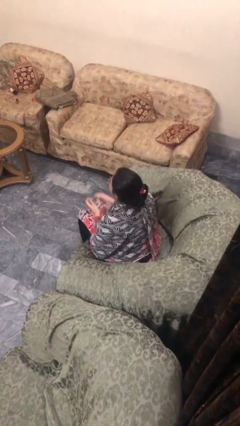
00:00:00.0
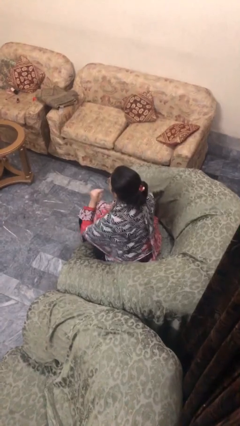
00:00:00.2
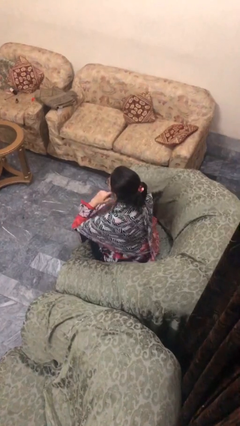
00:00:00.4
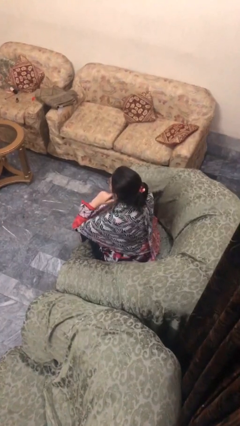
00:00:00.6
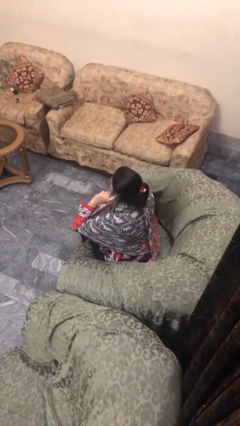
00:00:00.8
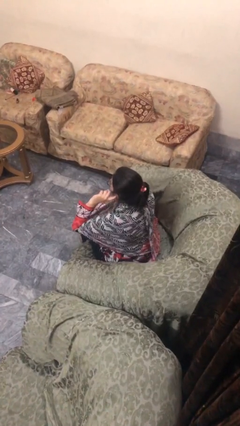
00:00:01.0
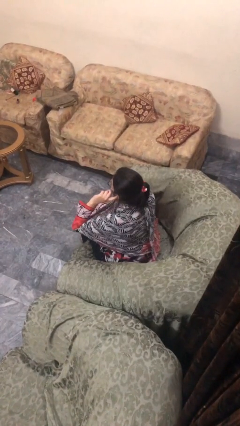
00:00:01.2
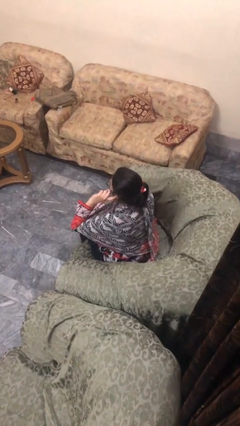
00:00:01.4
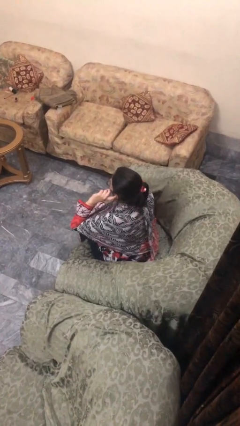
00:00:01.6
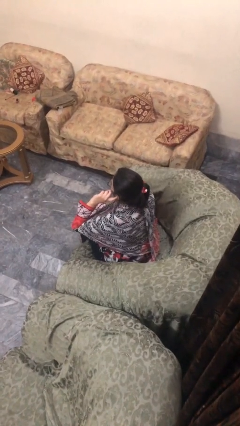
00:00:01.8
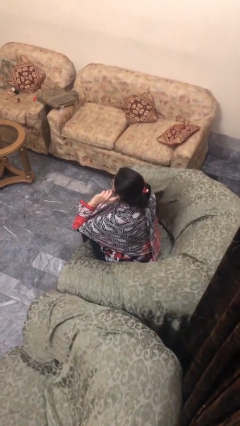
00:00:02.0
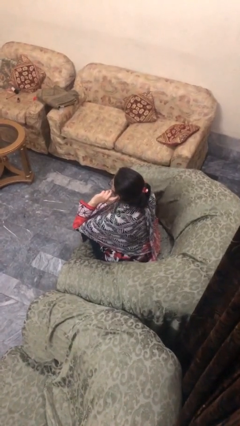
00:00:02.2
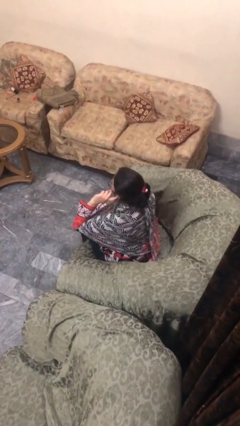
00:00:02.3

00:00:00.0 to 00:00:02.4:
person puts fingers in ear

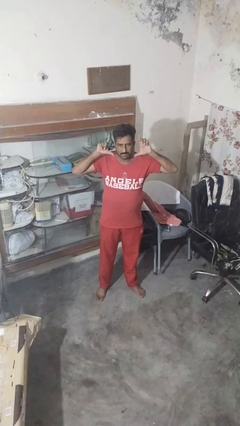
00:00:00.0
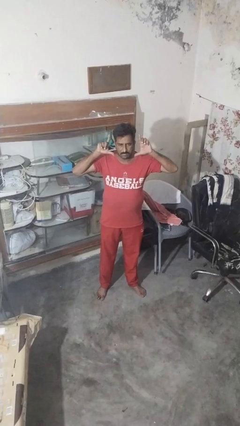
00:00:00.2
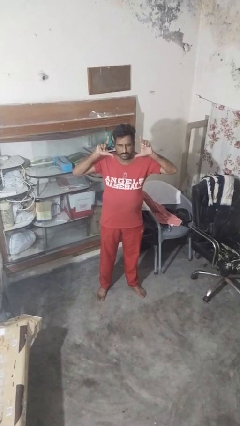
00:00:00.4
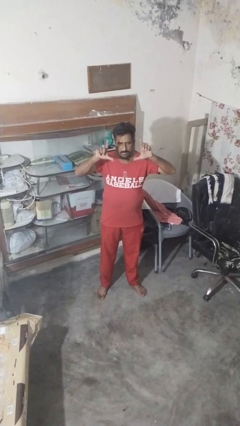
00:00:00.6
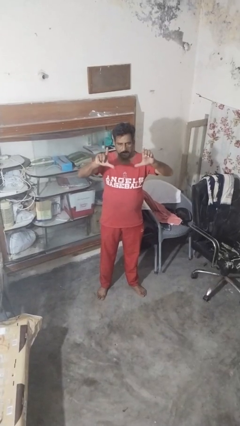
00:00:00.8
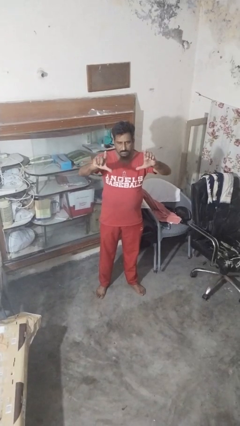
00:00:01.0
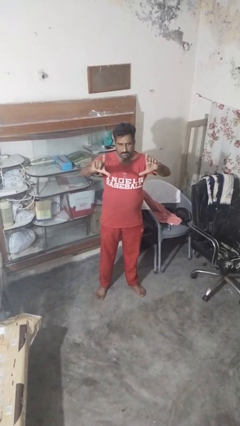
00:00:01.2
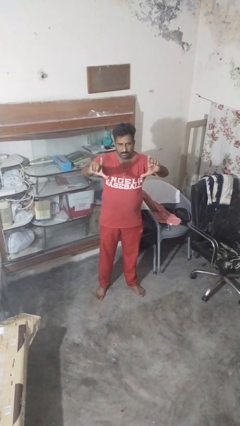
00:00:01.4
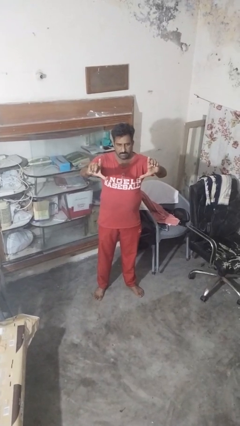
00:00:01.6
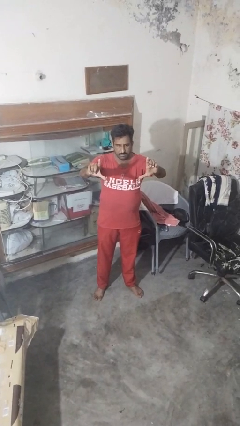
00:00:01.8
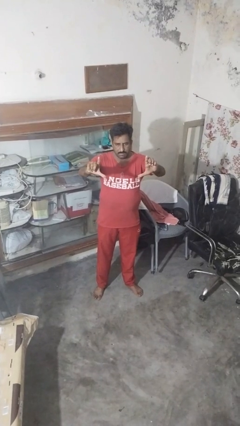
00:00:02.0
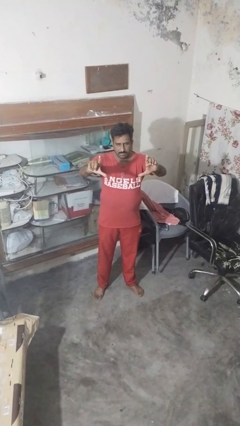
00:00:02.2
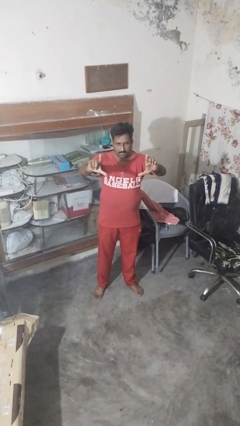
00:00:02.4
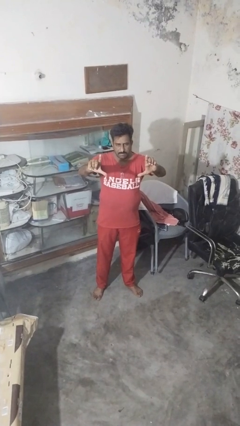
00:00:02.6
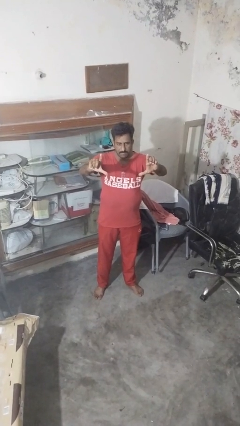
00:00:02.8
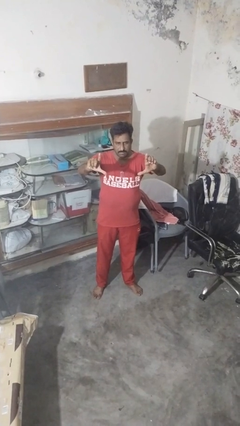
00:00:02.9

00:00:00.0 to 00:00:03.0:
person gestures zoom out

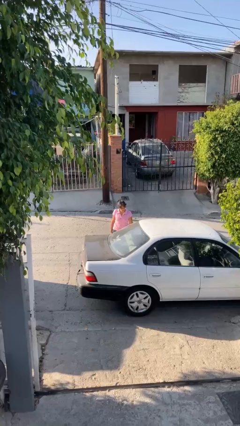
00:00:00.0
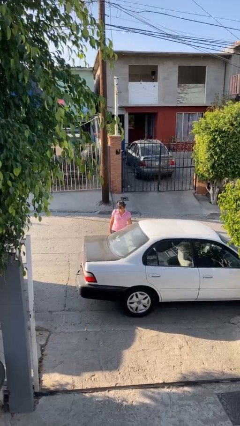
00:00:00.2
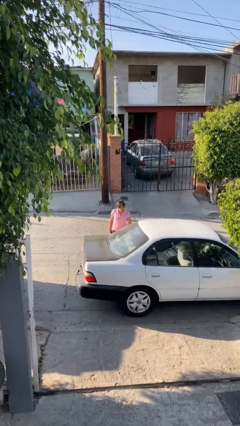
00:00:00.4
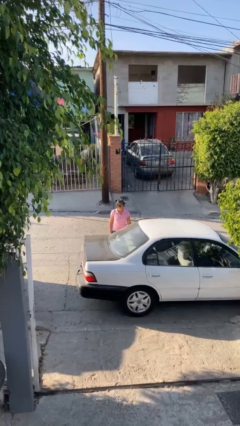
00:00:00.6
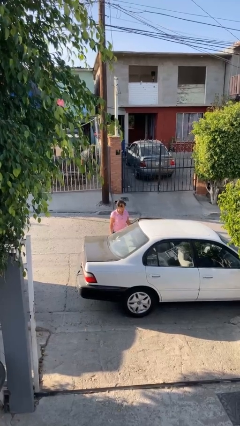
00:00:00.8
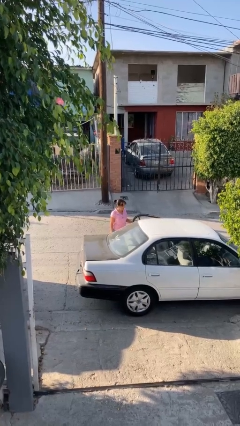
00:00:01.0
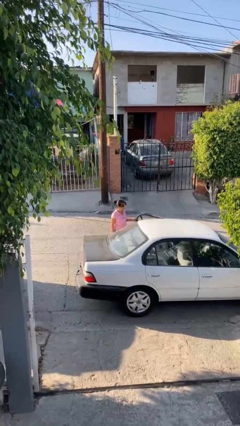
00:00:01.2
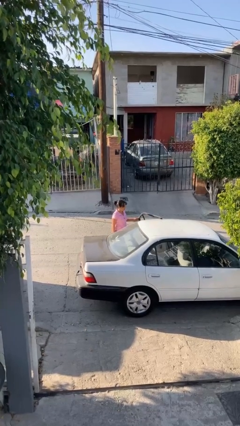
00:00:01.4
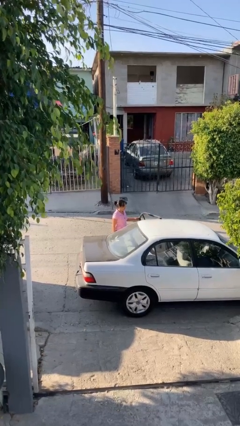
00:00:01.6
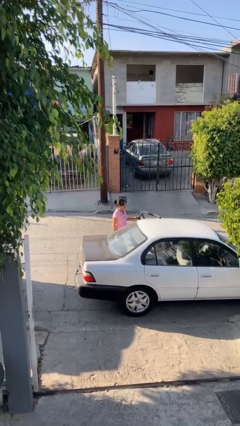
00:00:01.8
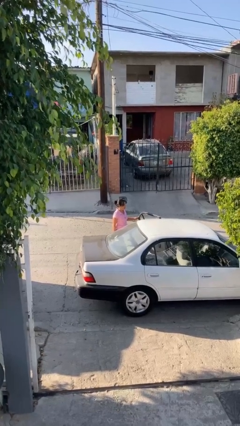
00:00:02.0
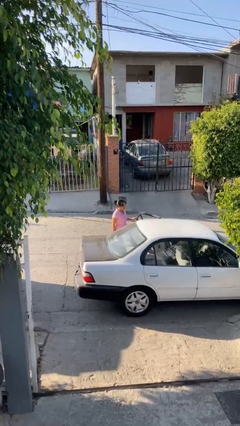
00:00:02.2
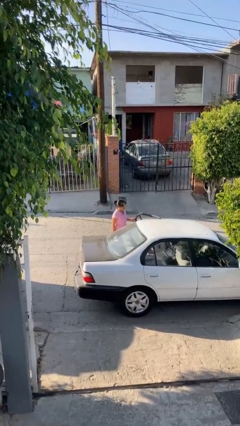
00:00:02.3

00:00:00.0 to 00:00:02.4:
person opens car door

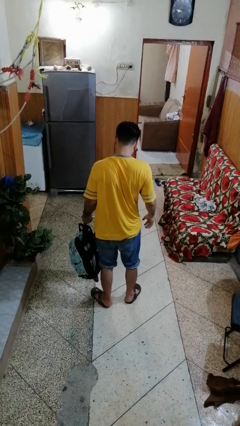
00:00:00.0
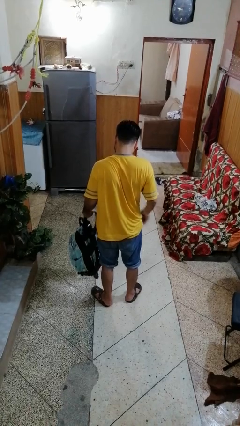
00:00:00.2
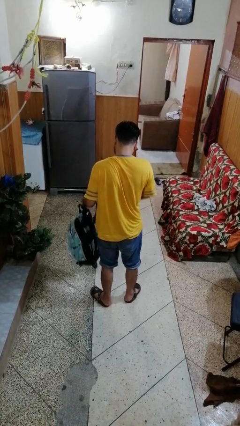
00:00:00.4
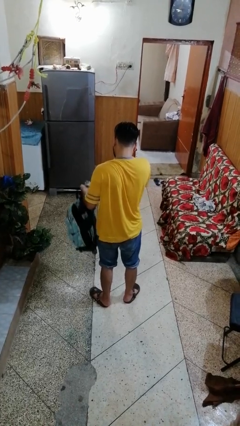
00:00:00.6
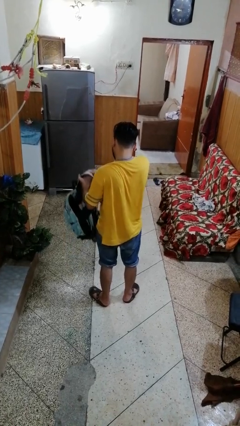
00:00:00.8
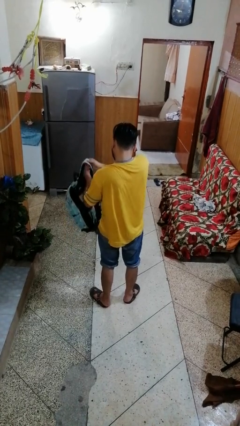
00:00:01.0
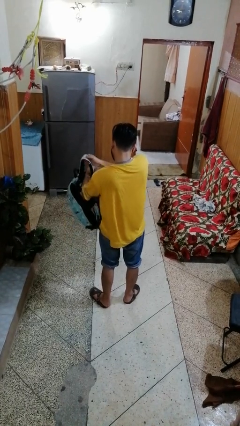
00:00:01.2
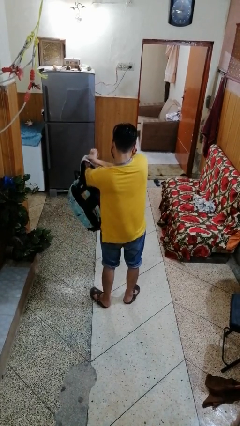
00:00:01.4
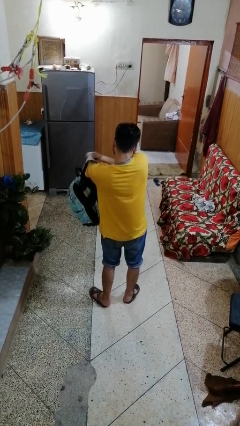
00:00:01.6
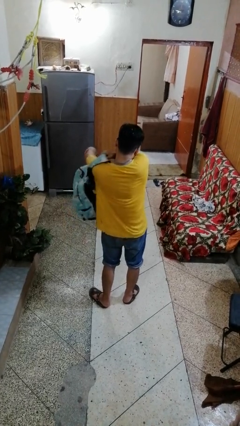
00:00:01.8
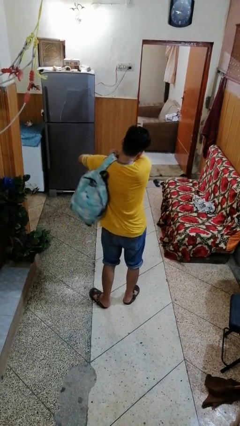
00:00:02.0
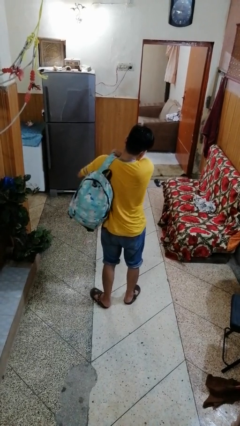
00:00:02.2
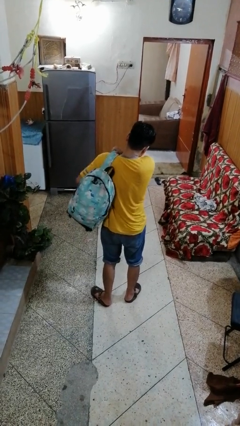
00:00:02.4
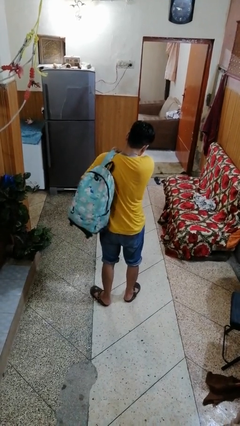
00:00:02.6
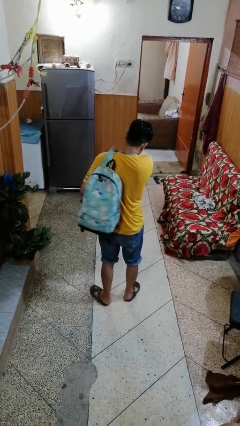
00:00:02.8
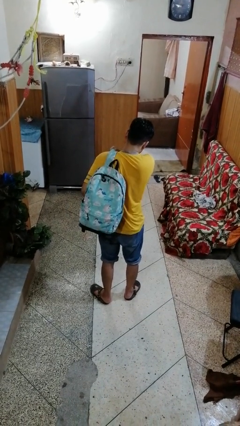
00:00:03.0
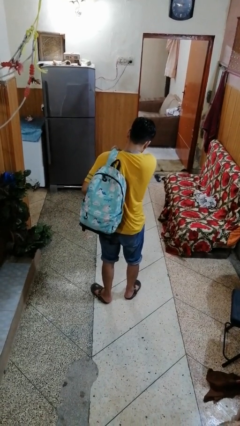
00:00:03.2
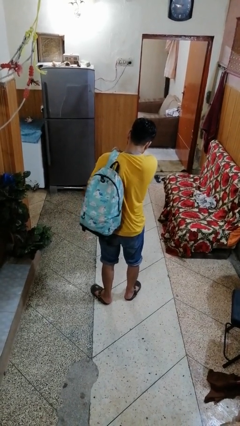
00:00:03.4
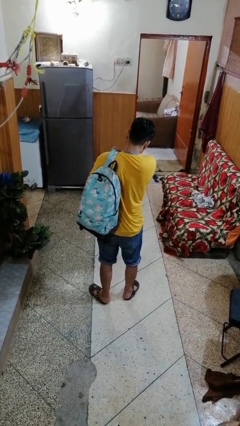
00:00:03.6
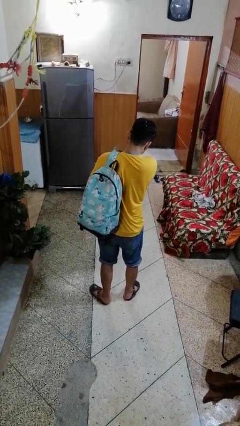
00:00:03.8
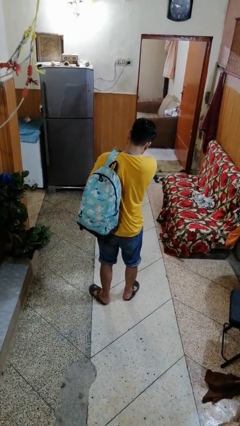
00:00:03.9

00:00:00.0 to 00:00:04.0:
person puts on backpack

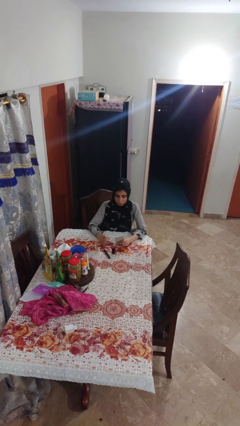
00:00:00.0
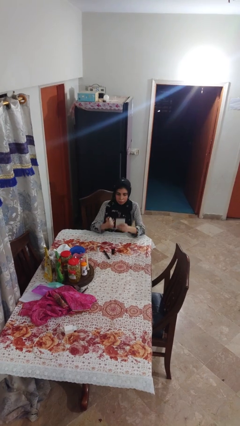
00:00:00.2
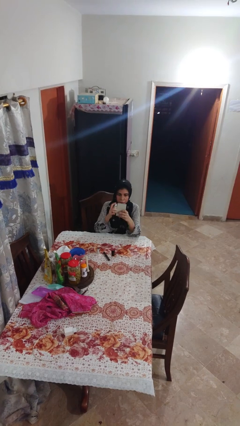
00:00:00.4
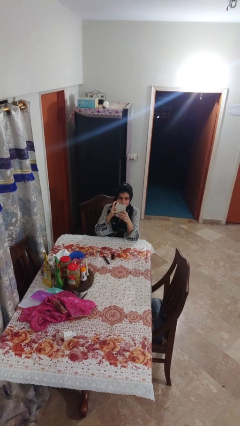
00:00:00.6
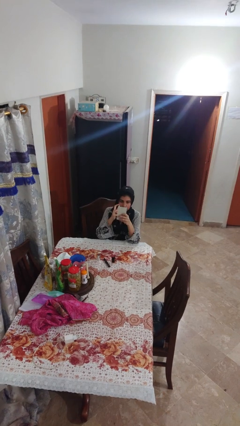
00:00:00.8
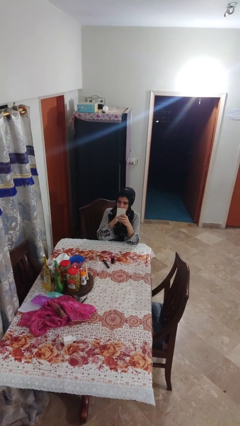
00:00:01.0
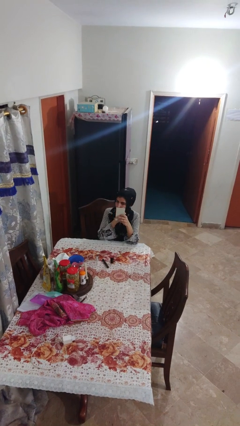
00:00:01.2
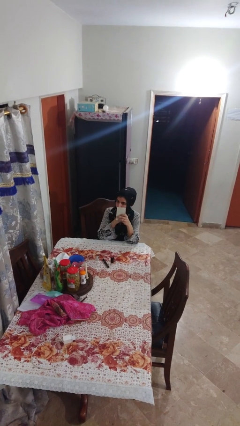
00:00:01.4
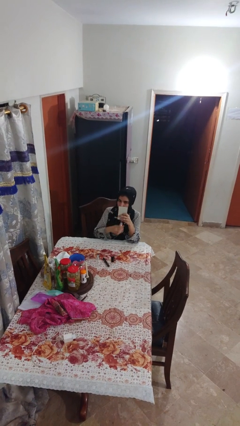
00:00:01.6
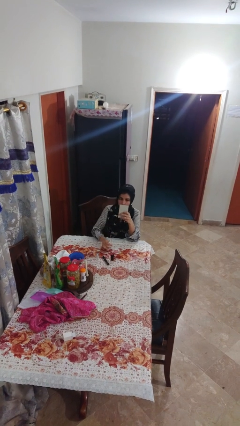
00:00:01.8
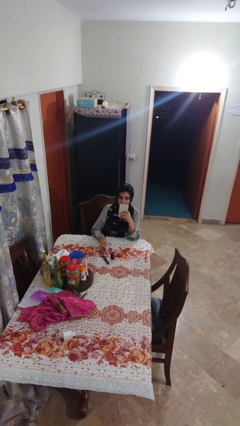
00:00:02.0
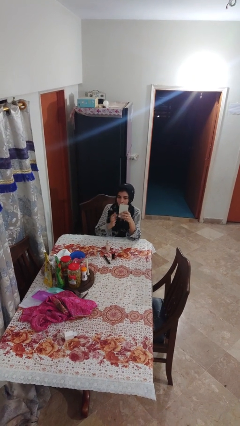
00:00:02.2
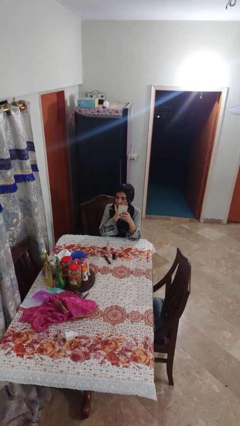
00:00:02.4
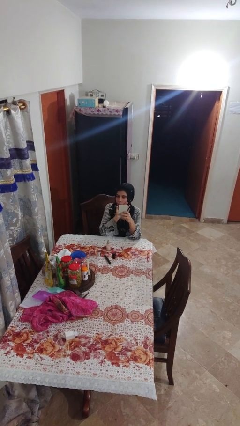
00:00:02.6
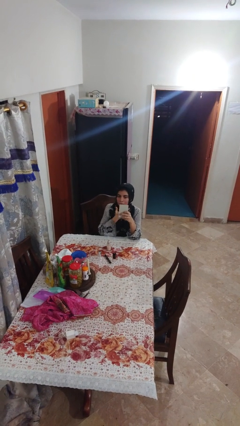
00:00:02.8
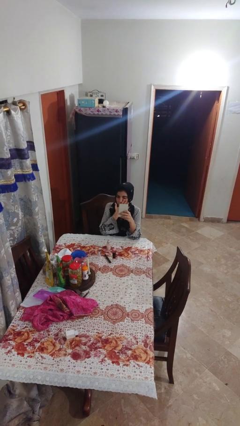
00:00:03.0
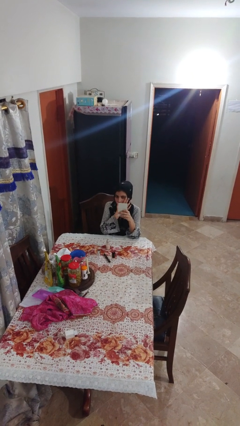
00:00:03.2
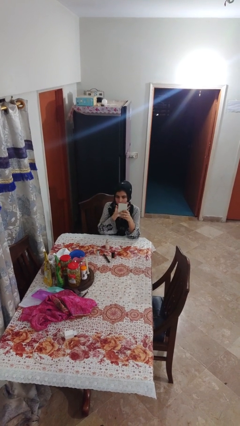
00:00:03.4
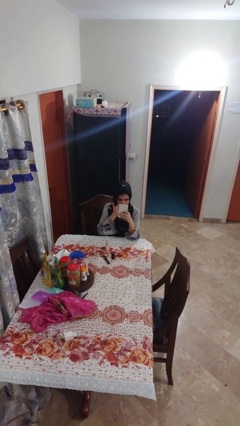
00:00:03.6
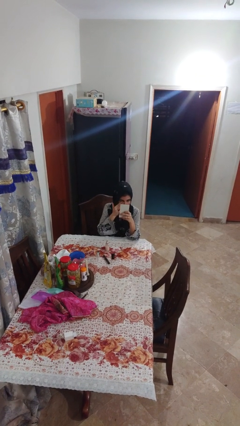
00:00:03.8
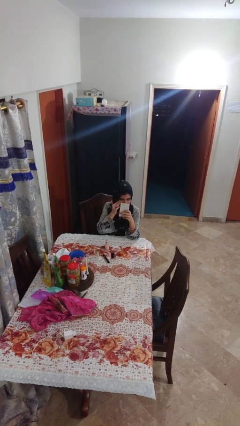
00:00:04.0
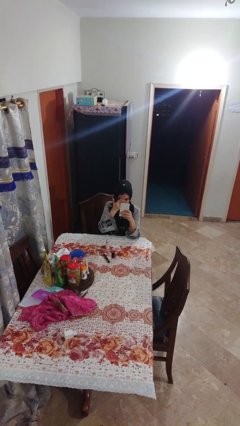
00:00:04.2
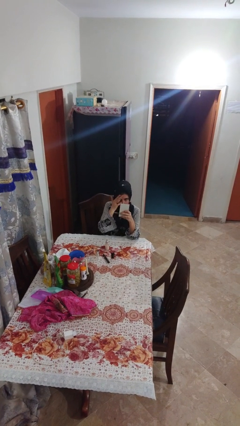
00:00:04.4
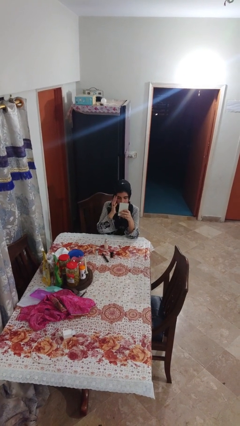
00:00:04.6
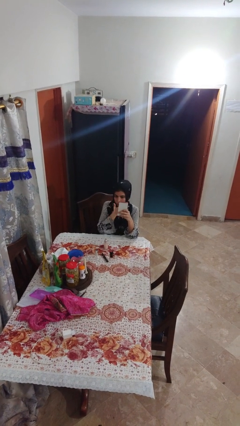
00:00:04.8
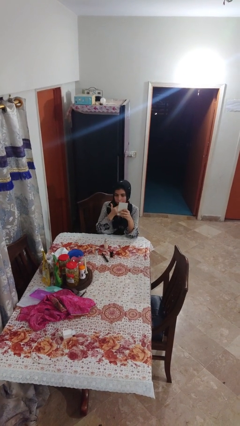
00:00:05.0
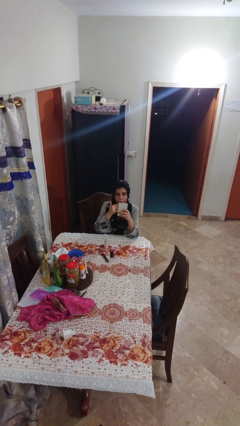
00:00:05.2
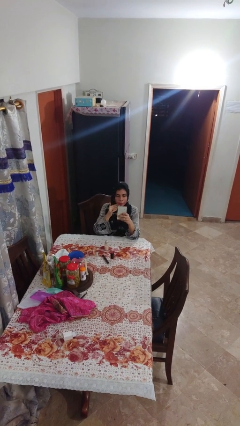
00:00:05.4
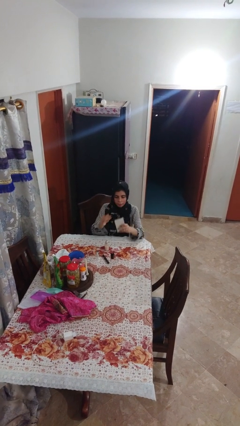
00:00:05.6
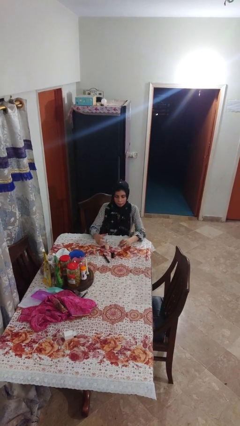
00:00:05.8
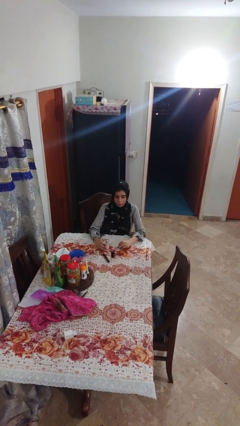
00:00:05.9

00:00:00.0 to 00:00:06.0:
person applies foundation makeup
